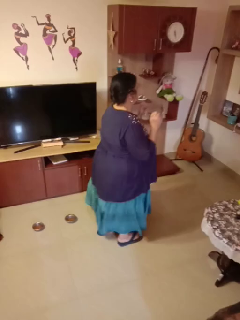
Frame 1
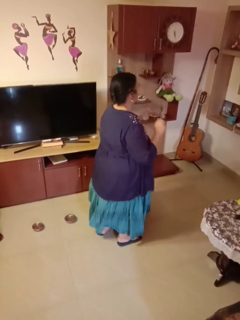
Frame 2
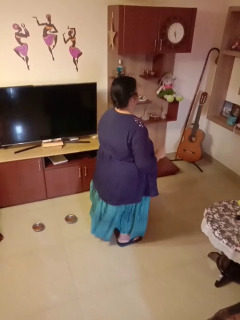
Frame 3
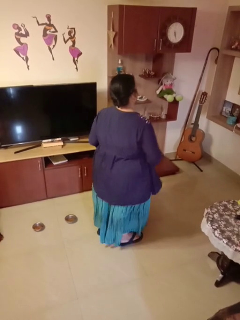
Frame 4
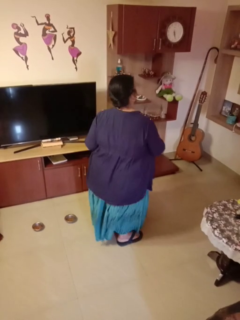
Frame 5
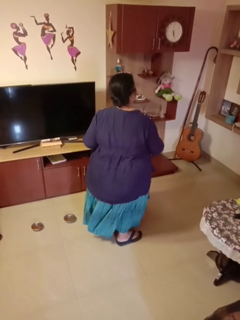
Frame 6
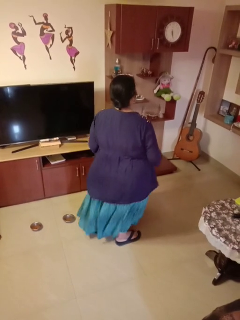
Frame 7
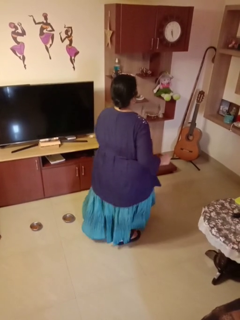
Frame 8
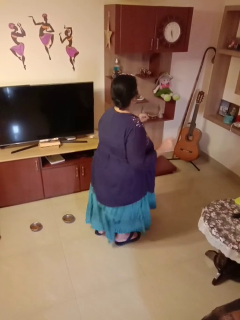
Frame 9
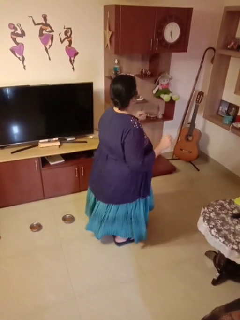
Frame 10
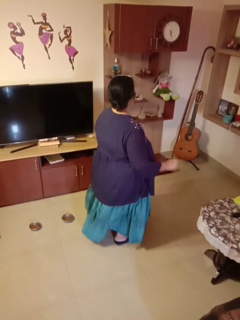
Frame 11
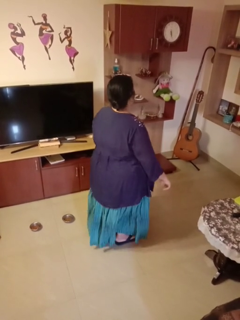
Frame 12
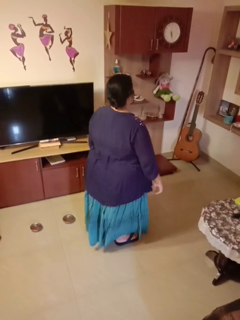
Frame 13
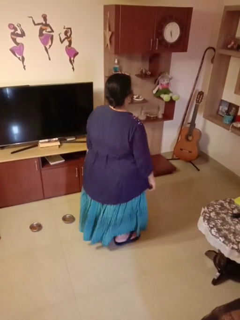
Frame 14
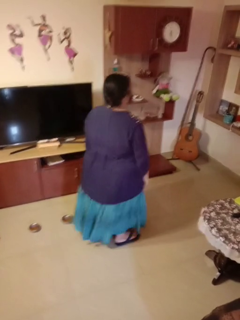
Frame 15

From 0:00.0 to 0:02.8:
person dances in place

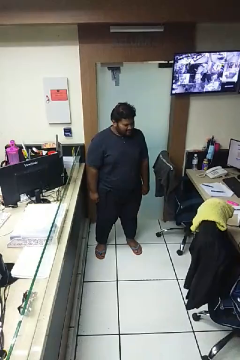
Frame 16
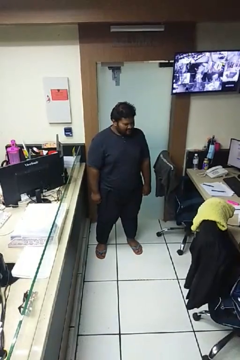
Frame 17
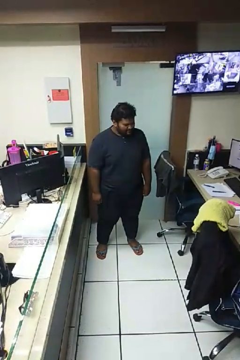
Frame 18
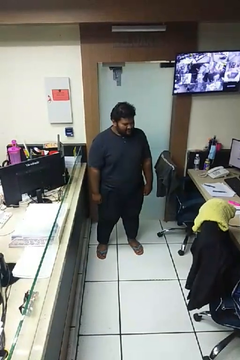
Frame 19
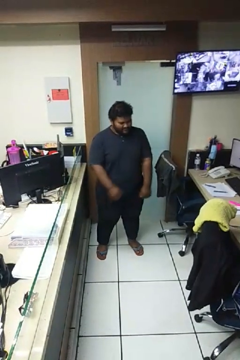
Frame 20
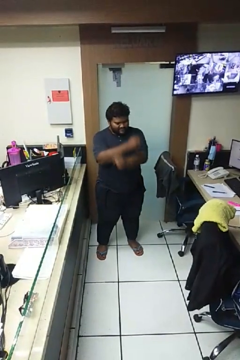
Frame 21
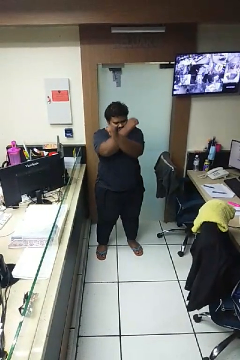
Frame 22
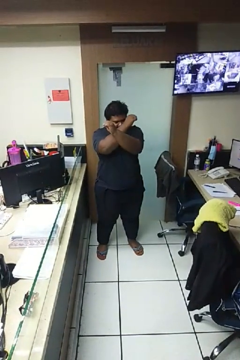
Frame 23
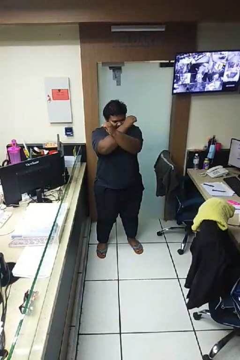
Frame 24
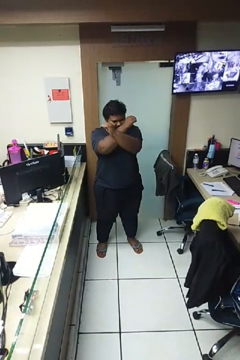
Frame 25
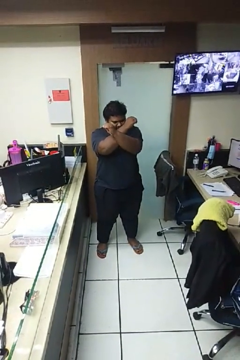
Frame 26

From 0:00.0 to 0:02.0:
person gestures arms x

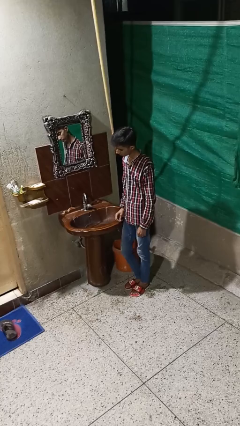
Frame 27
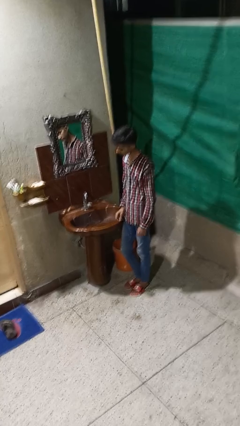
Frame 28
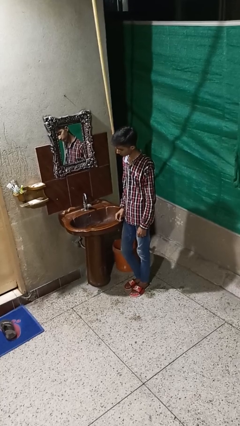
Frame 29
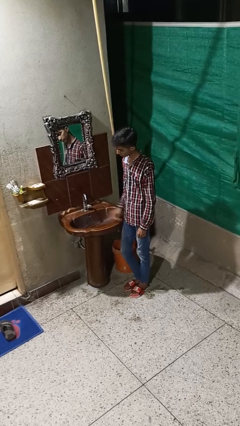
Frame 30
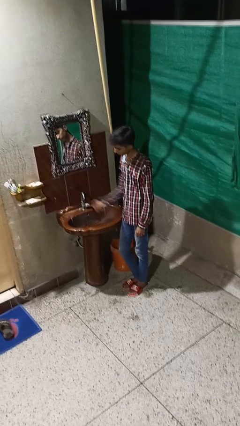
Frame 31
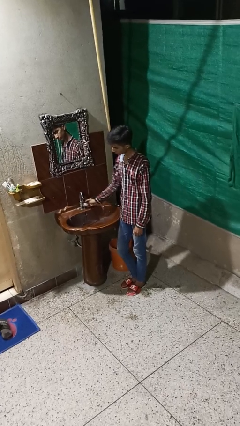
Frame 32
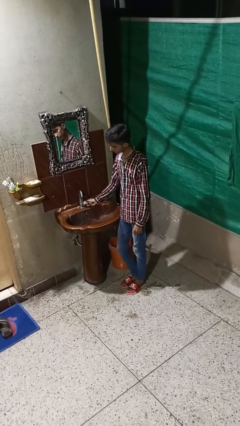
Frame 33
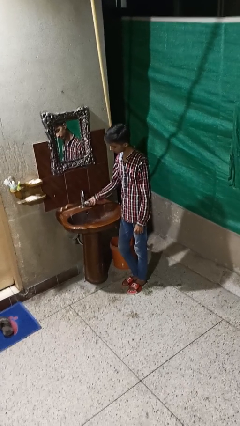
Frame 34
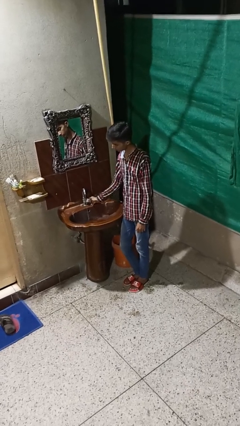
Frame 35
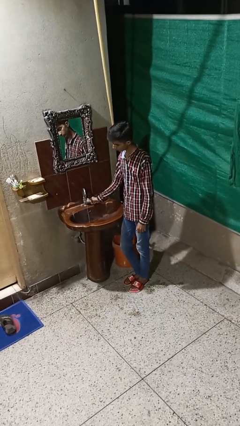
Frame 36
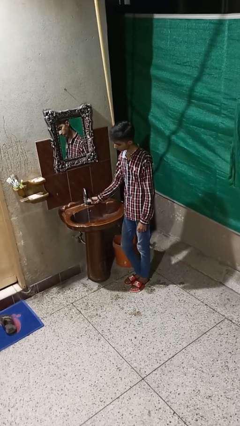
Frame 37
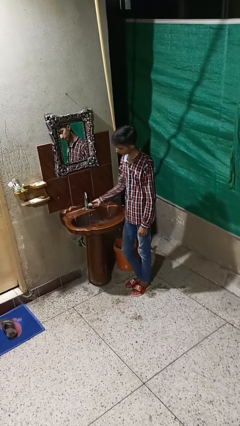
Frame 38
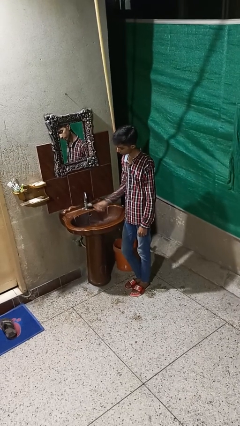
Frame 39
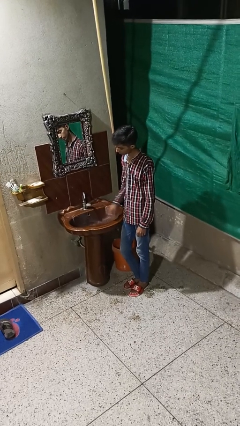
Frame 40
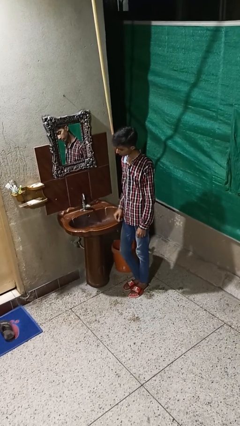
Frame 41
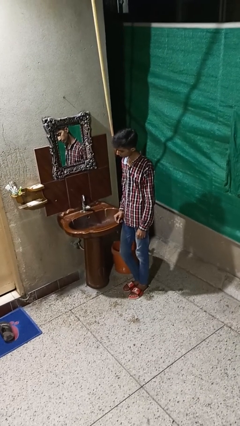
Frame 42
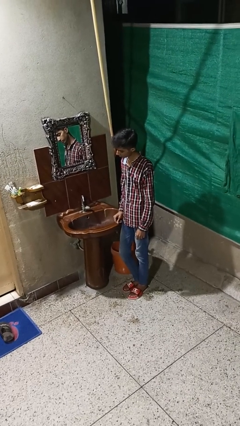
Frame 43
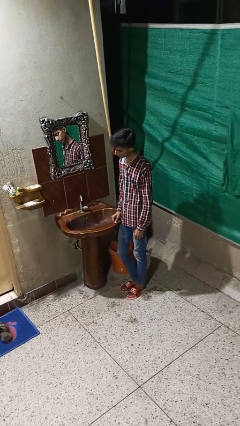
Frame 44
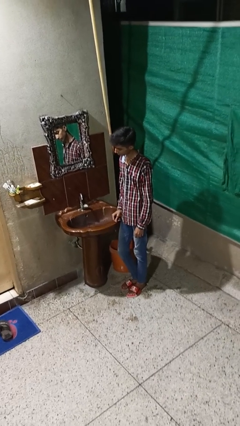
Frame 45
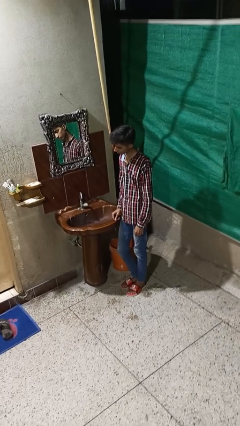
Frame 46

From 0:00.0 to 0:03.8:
person turns off faucet

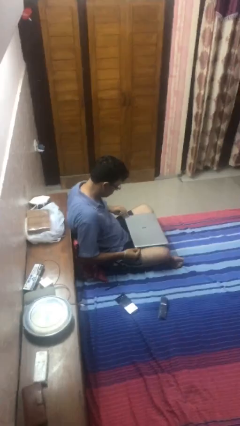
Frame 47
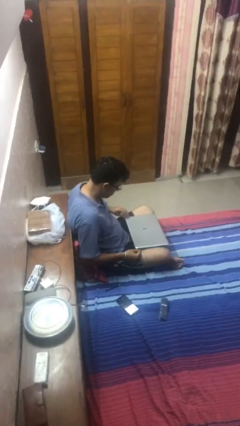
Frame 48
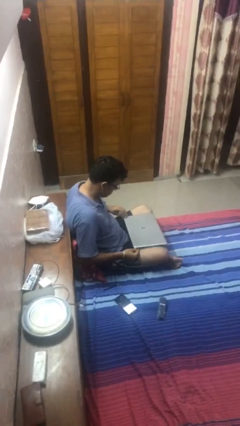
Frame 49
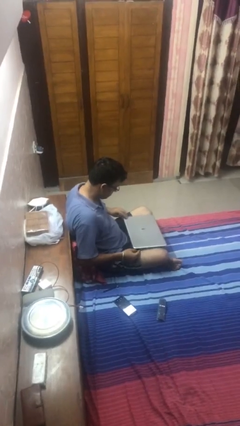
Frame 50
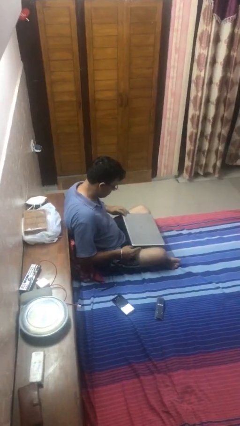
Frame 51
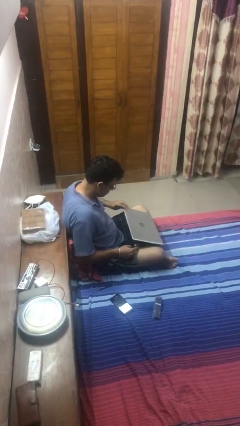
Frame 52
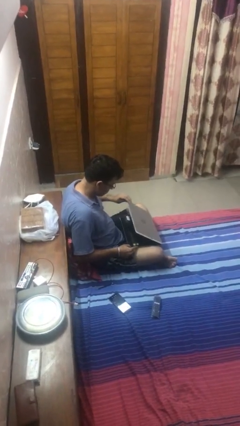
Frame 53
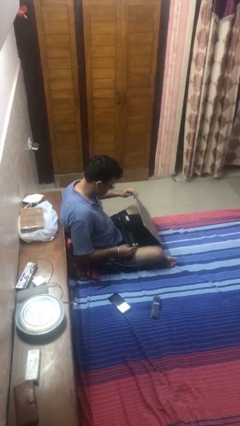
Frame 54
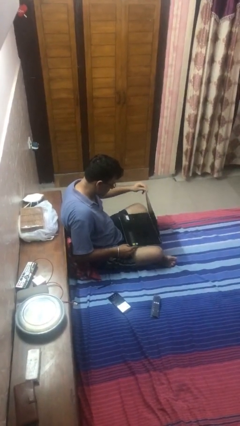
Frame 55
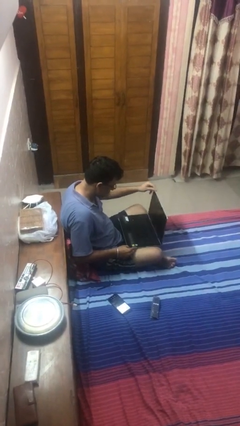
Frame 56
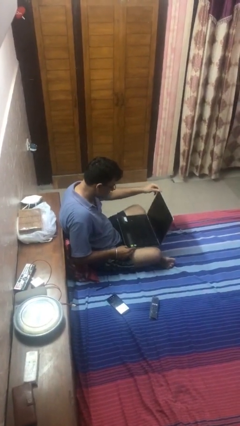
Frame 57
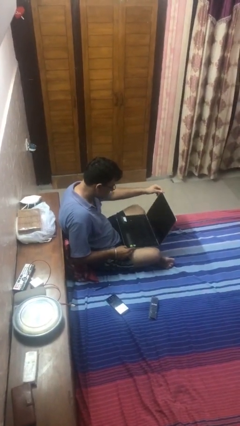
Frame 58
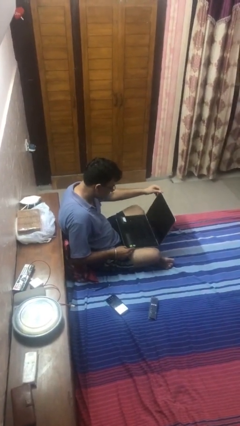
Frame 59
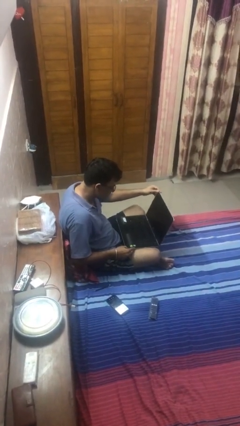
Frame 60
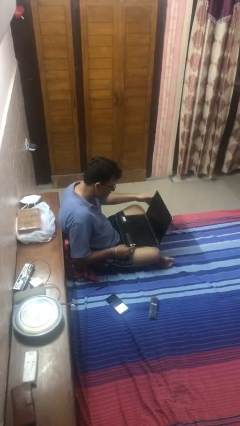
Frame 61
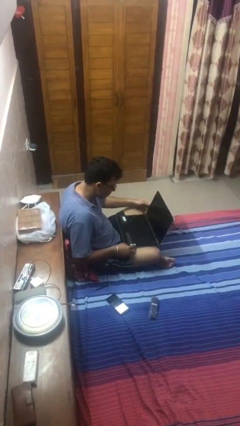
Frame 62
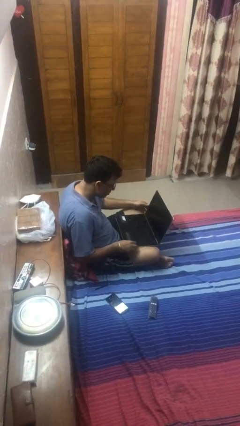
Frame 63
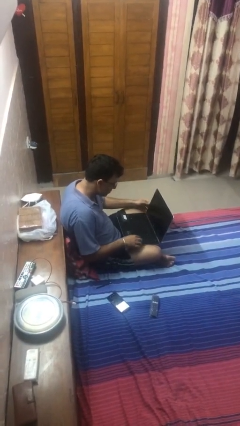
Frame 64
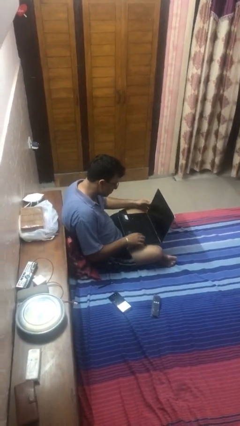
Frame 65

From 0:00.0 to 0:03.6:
person opens laptop

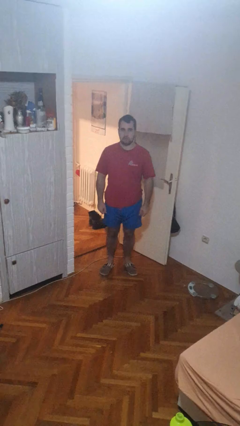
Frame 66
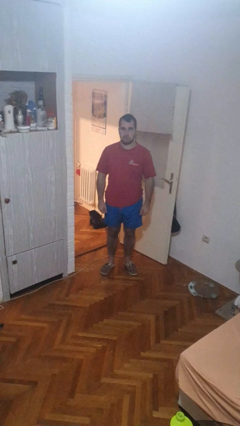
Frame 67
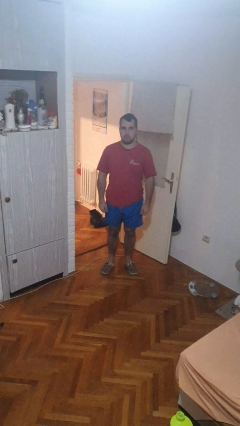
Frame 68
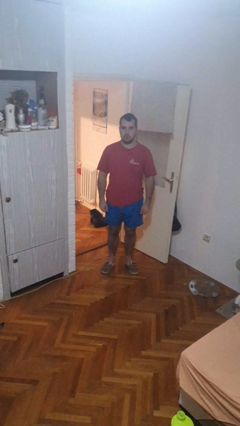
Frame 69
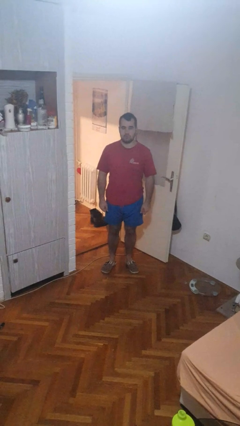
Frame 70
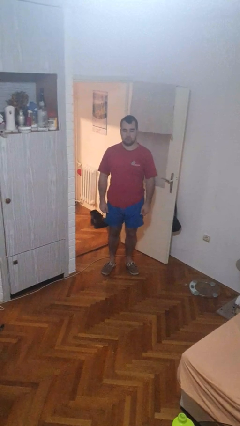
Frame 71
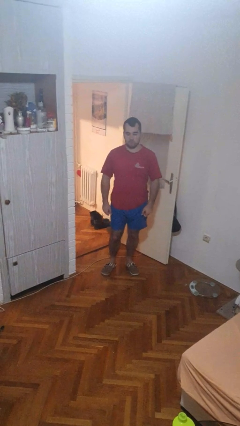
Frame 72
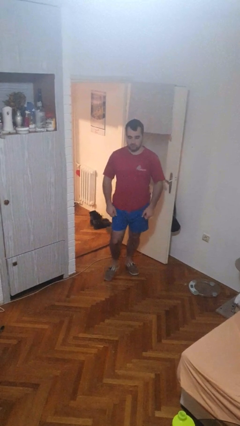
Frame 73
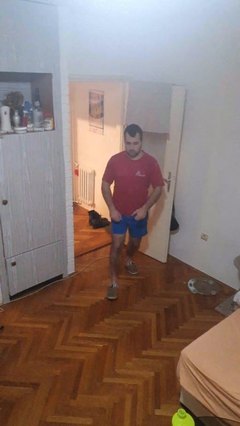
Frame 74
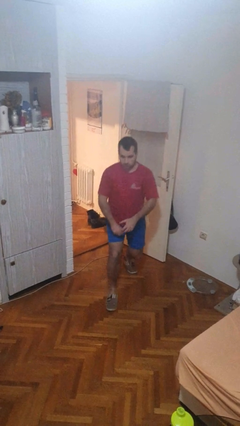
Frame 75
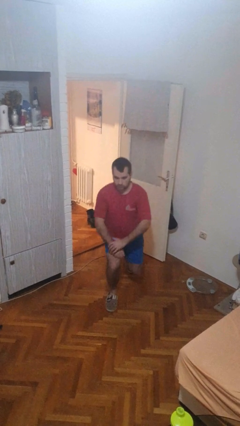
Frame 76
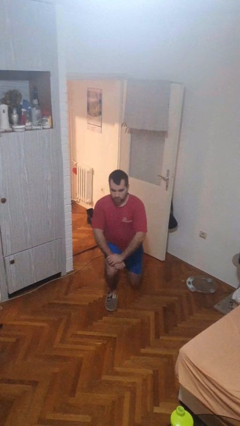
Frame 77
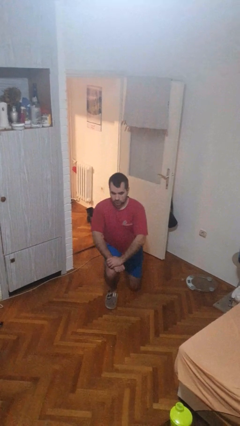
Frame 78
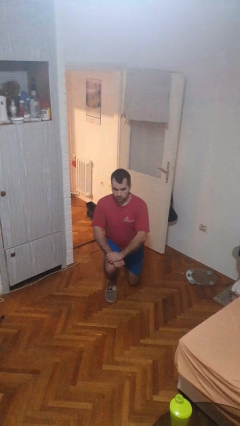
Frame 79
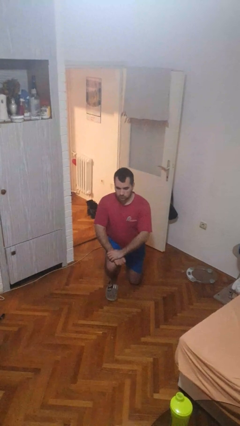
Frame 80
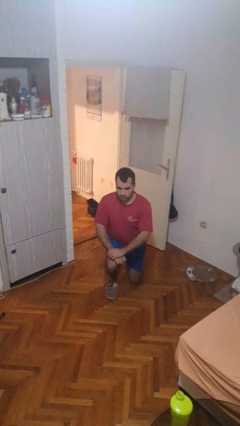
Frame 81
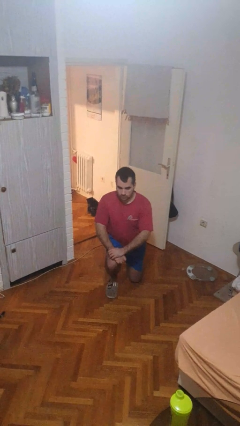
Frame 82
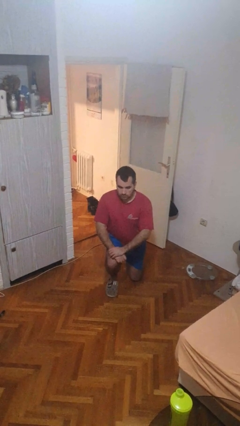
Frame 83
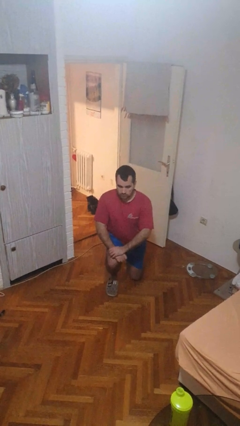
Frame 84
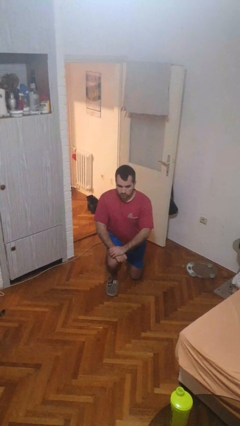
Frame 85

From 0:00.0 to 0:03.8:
person kneels

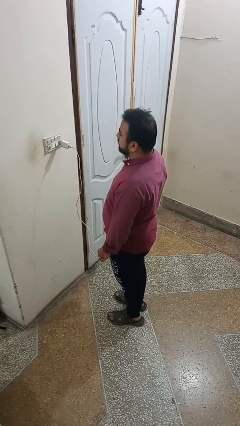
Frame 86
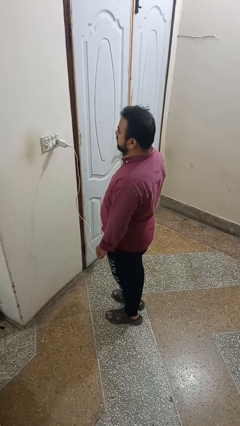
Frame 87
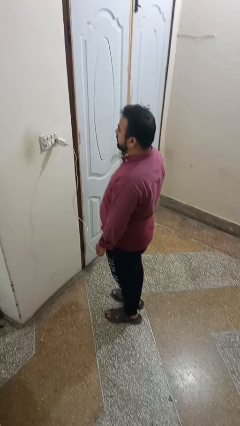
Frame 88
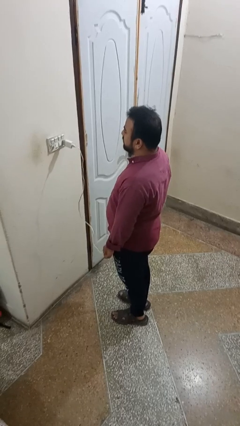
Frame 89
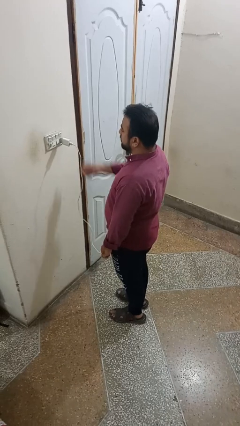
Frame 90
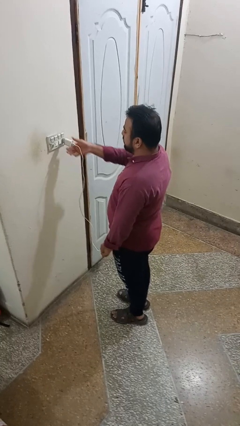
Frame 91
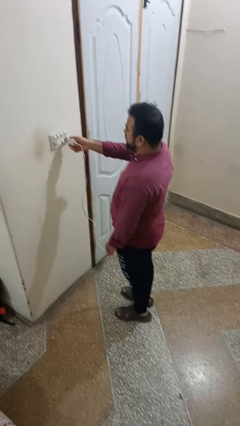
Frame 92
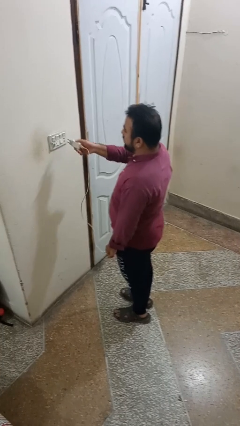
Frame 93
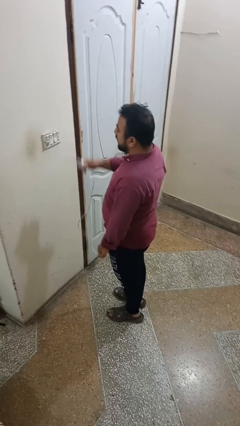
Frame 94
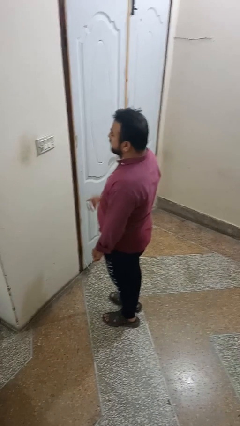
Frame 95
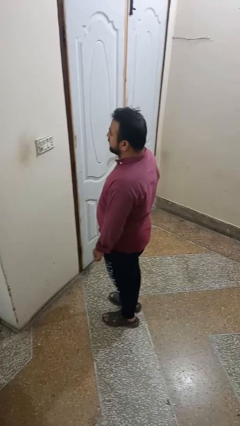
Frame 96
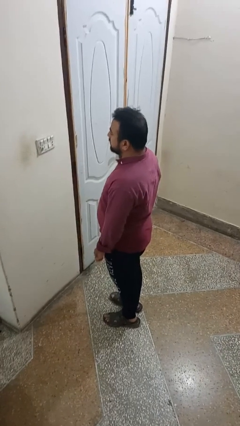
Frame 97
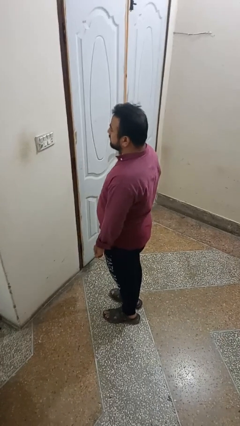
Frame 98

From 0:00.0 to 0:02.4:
person unplugs from electrical socket
